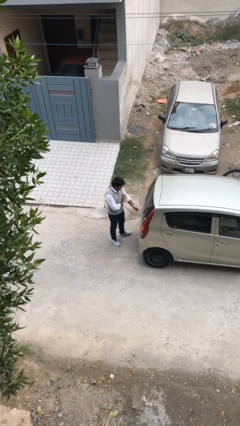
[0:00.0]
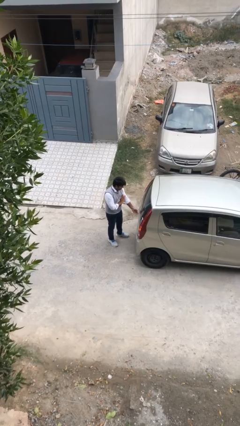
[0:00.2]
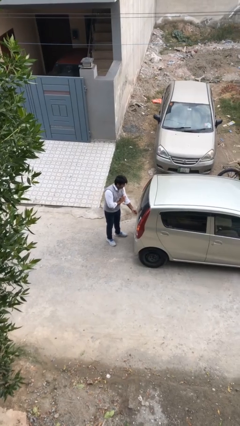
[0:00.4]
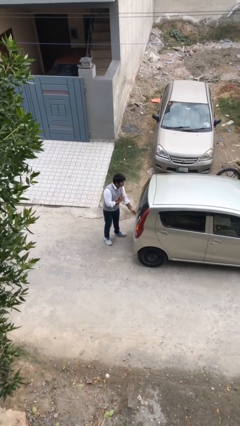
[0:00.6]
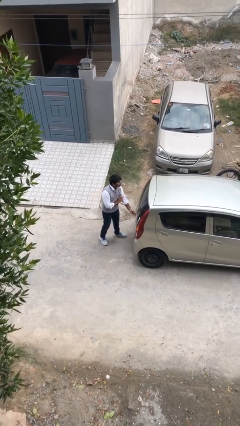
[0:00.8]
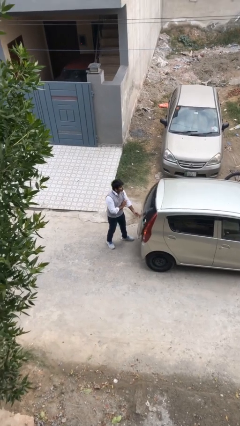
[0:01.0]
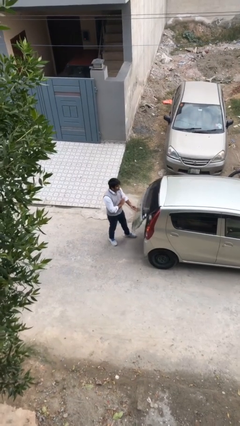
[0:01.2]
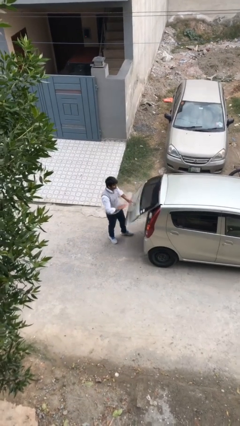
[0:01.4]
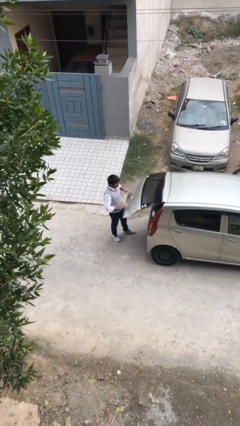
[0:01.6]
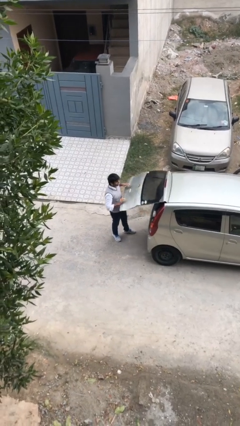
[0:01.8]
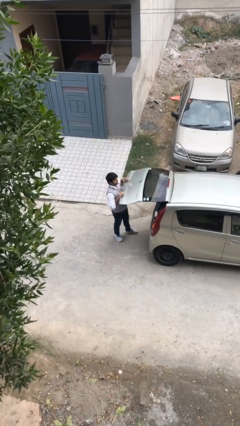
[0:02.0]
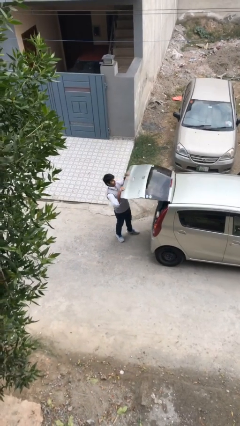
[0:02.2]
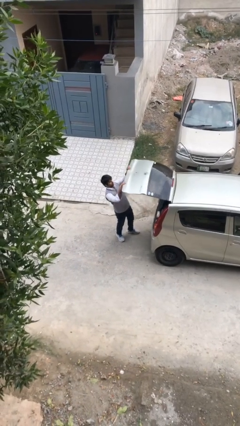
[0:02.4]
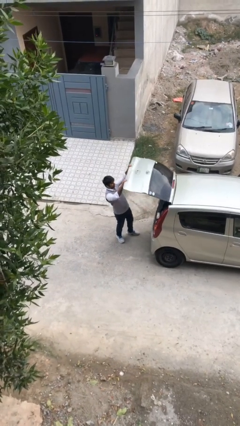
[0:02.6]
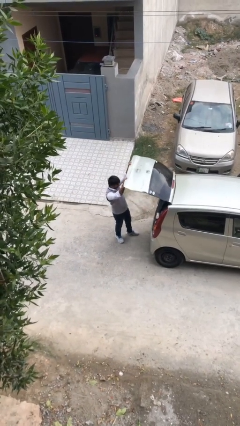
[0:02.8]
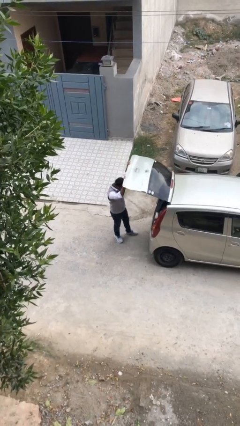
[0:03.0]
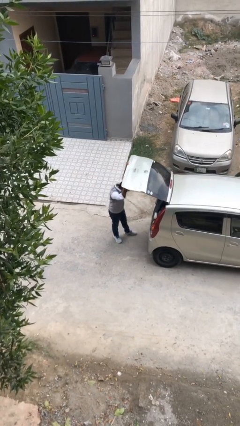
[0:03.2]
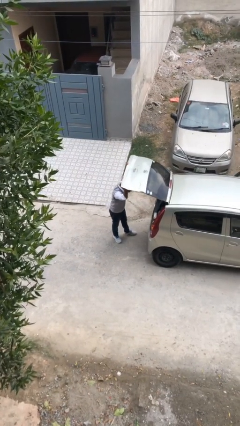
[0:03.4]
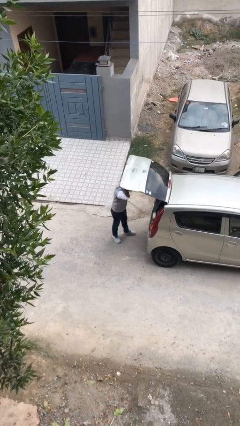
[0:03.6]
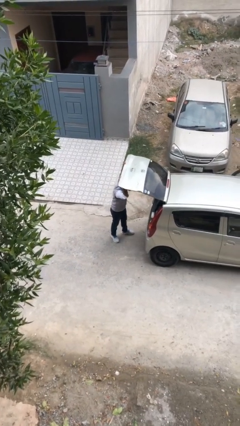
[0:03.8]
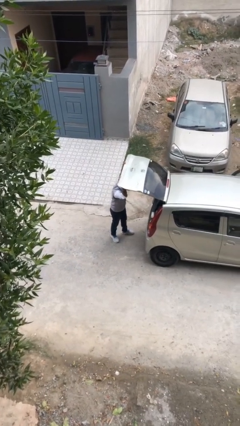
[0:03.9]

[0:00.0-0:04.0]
person opens car trunk

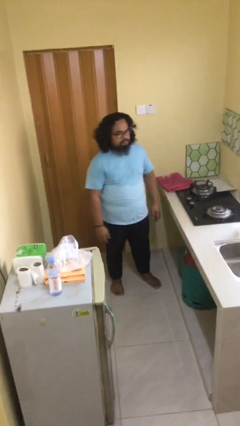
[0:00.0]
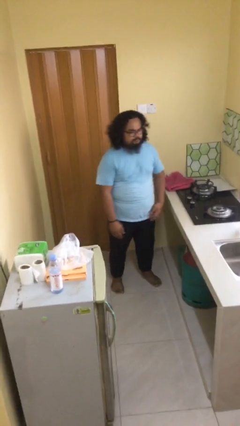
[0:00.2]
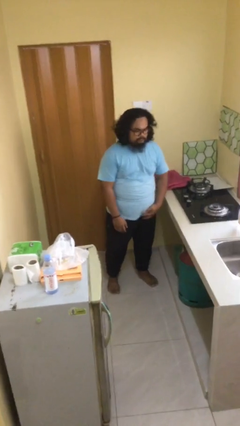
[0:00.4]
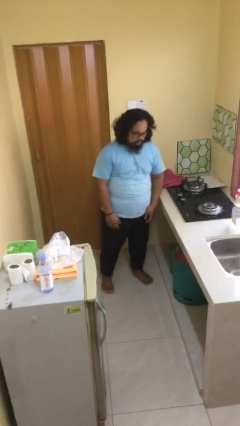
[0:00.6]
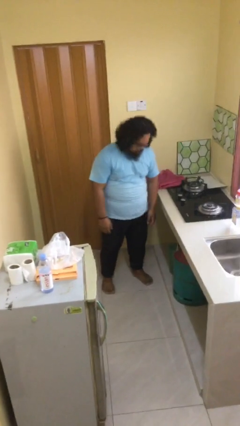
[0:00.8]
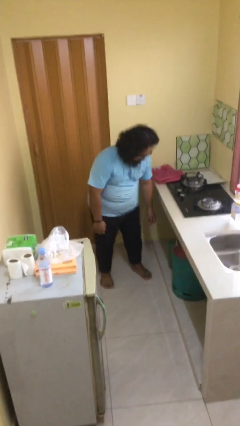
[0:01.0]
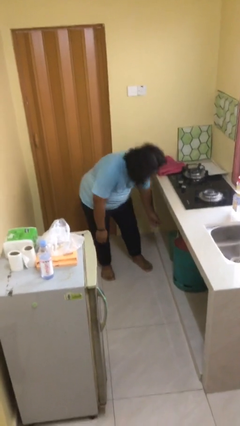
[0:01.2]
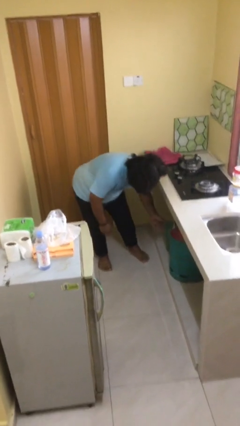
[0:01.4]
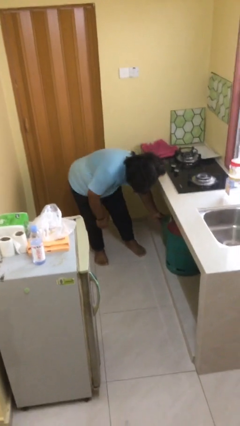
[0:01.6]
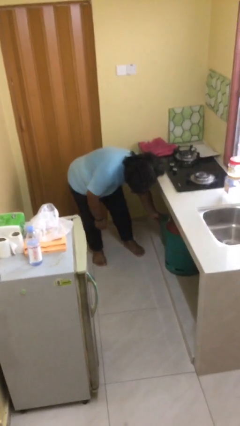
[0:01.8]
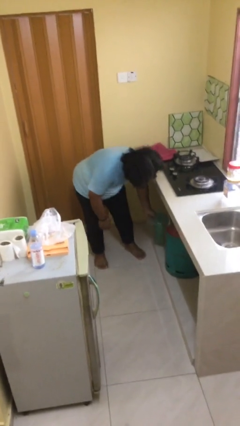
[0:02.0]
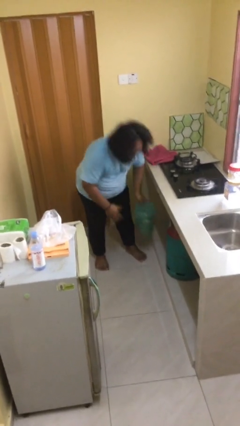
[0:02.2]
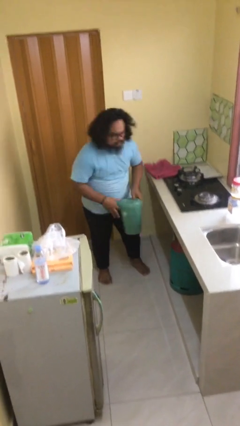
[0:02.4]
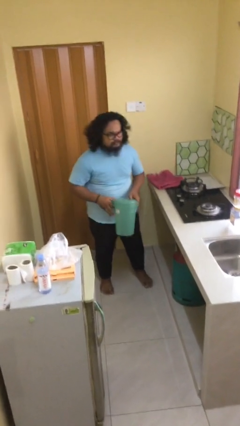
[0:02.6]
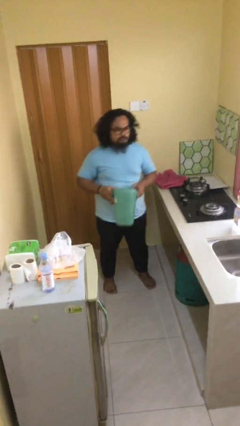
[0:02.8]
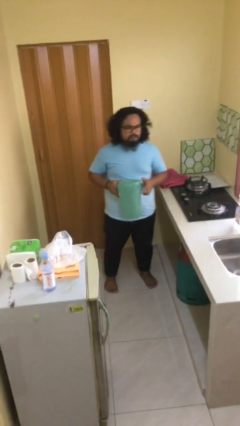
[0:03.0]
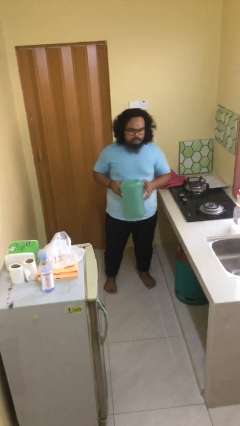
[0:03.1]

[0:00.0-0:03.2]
person picks up object from cabinet

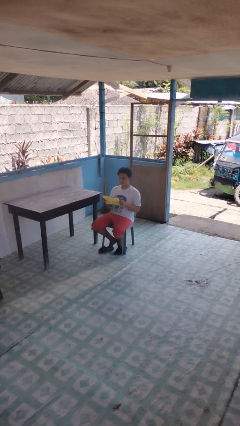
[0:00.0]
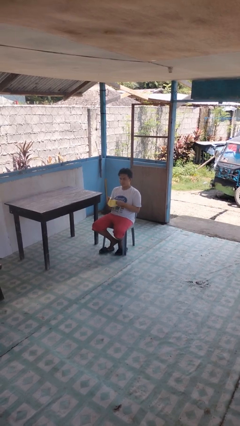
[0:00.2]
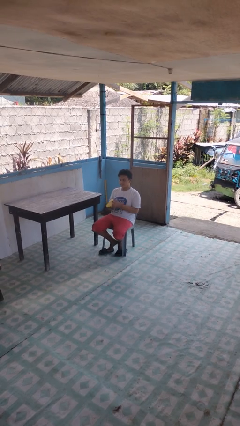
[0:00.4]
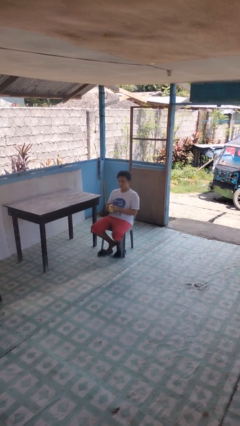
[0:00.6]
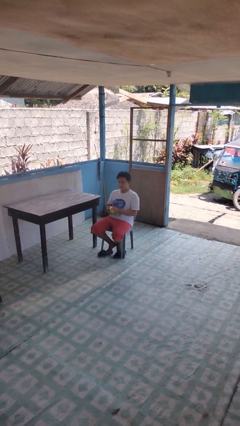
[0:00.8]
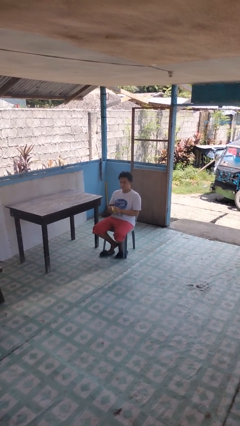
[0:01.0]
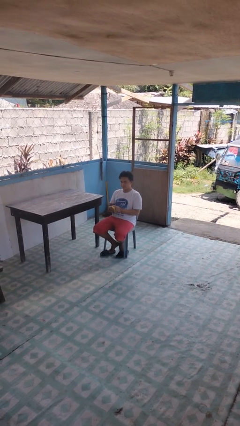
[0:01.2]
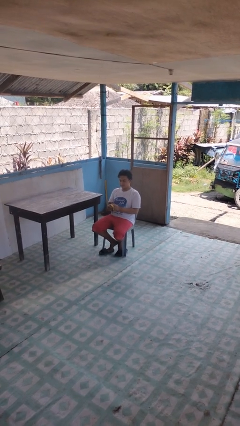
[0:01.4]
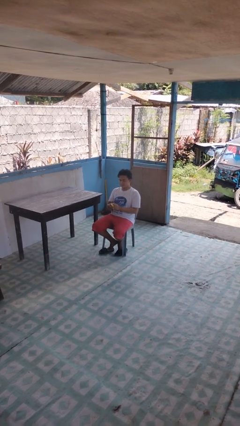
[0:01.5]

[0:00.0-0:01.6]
person crumples paper

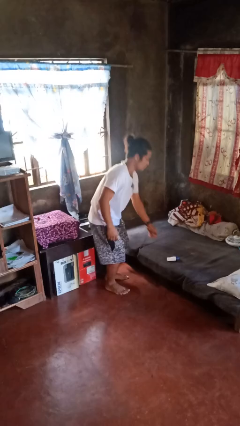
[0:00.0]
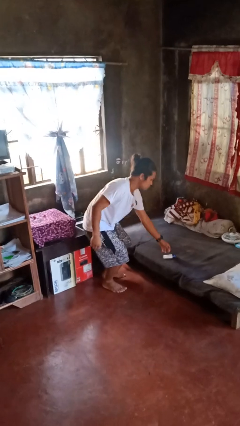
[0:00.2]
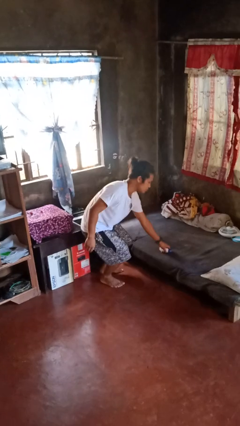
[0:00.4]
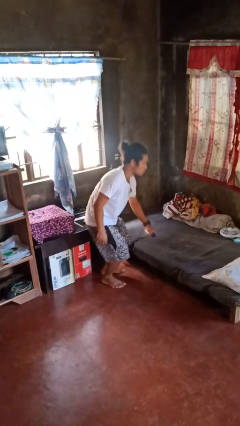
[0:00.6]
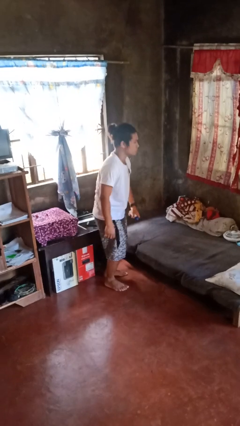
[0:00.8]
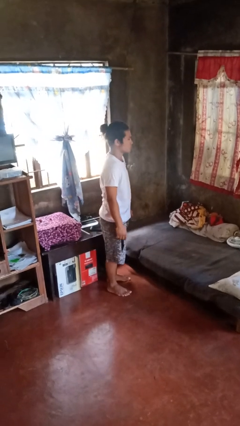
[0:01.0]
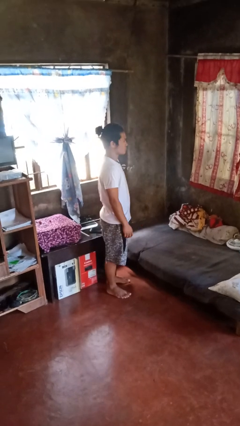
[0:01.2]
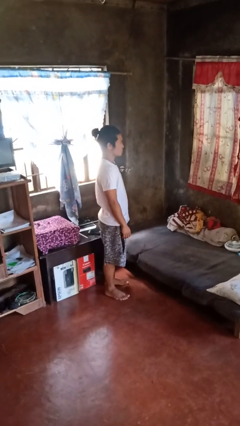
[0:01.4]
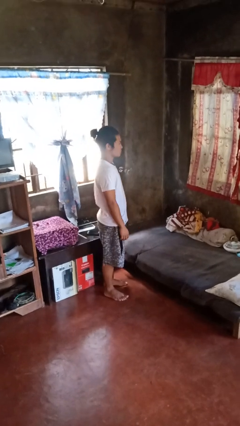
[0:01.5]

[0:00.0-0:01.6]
person picks up object from bed

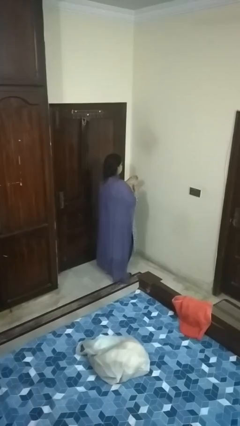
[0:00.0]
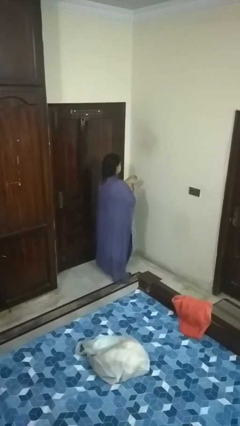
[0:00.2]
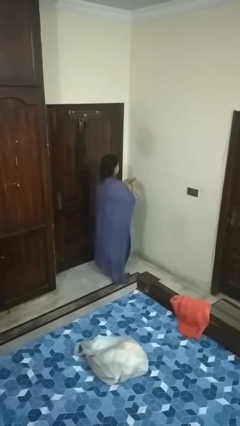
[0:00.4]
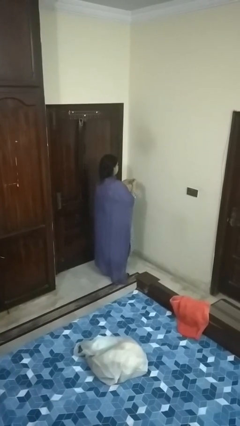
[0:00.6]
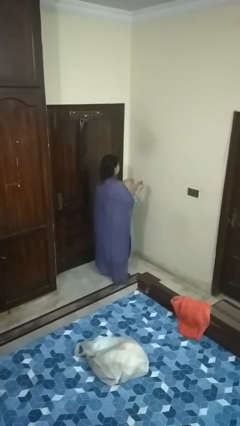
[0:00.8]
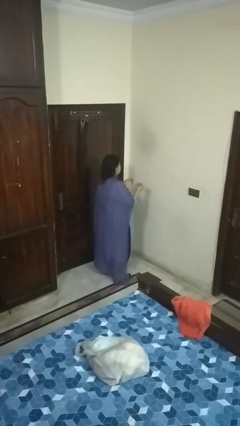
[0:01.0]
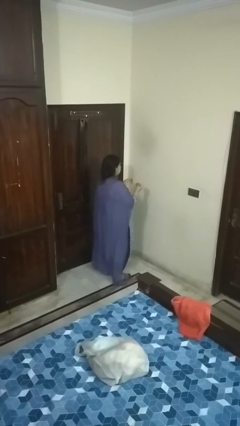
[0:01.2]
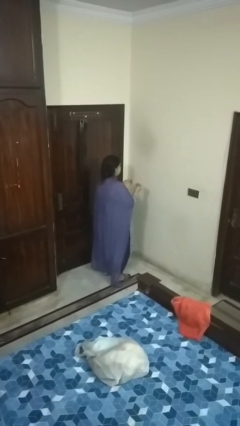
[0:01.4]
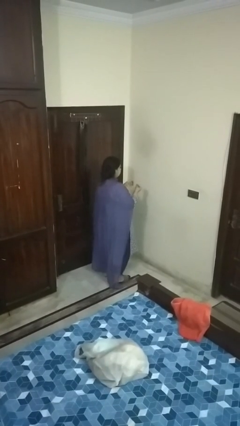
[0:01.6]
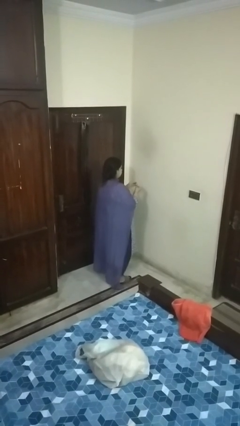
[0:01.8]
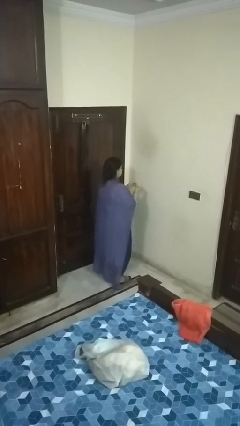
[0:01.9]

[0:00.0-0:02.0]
person takes off ring

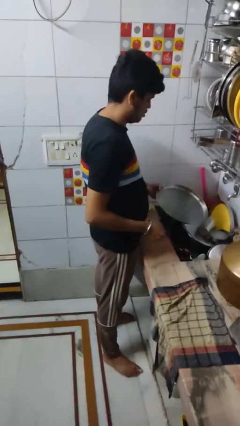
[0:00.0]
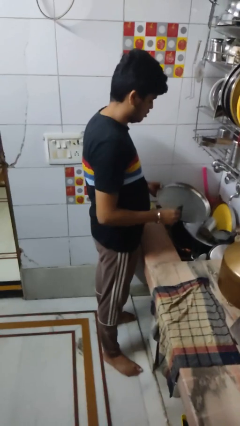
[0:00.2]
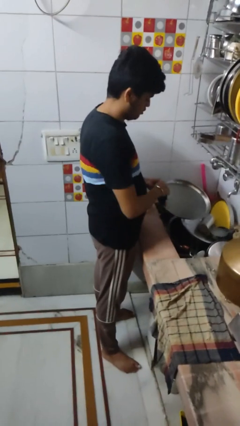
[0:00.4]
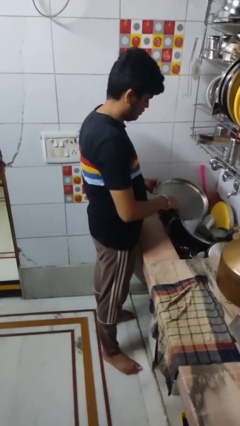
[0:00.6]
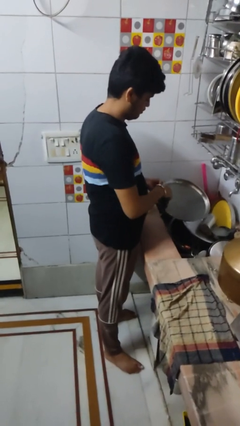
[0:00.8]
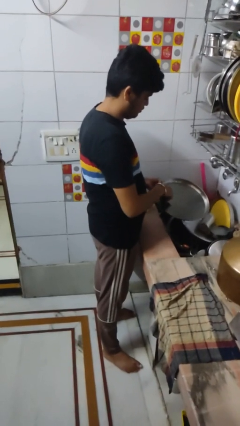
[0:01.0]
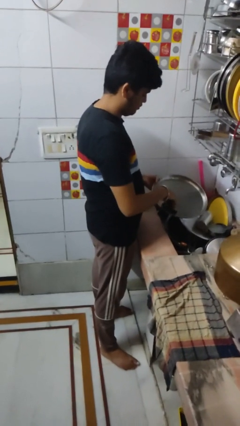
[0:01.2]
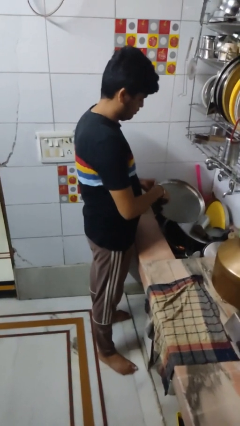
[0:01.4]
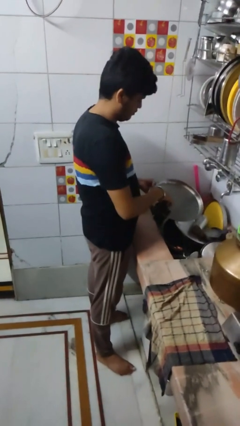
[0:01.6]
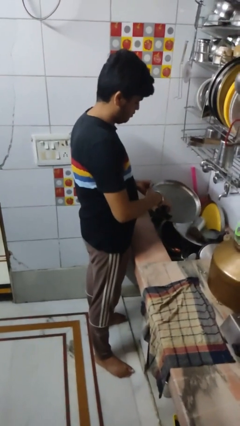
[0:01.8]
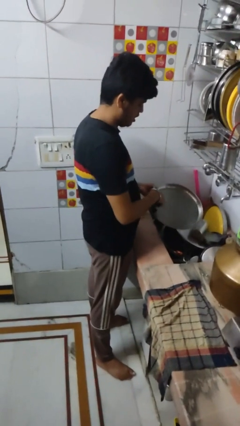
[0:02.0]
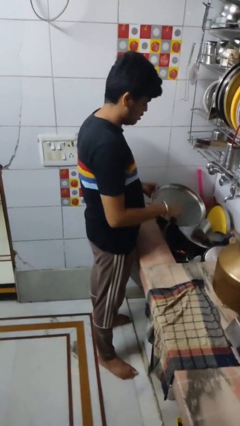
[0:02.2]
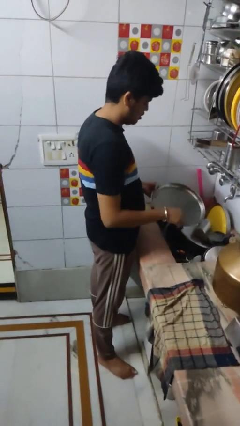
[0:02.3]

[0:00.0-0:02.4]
person washes dish

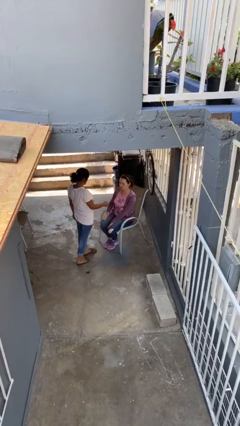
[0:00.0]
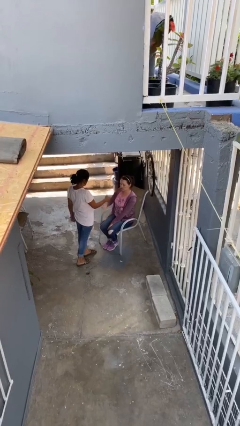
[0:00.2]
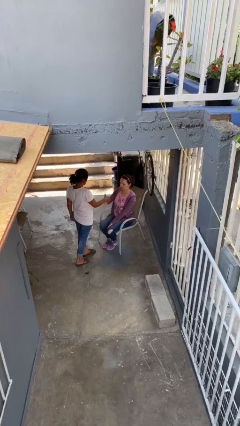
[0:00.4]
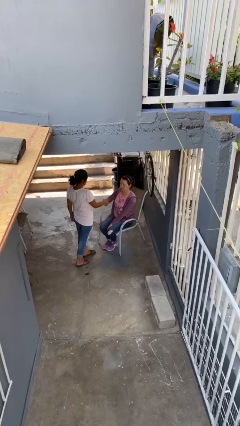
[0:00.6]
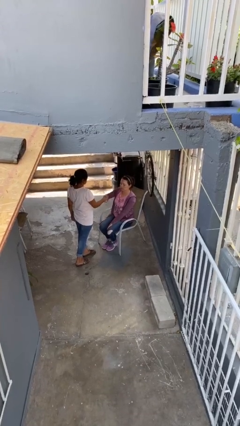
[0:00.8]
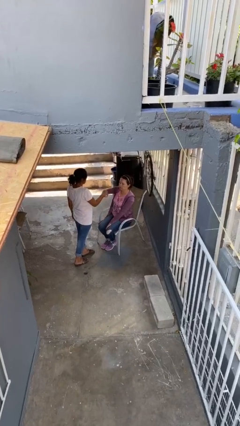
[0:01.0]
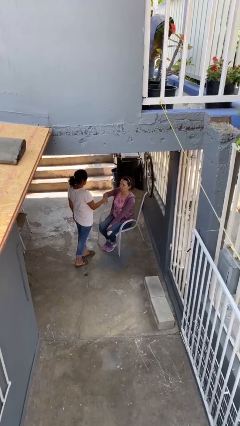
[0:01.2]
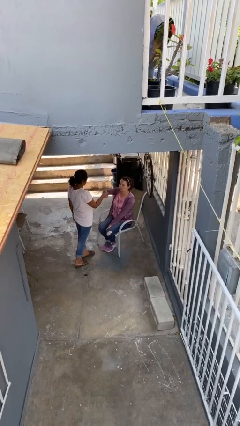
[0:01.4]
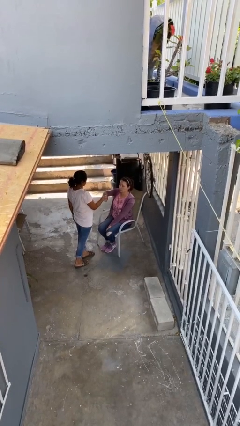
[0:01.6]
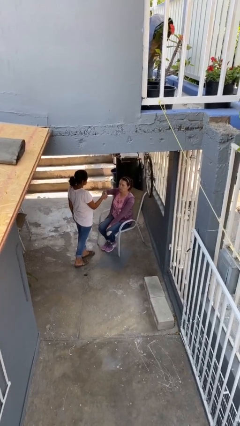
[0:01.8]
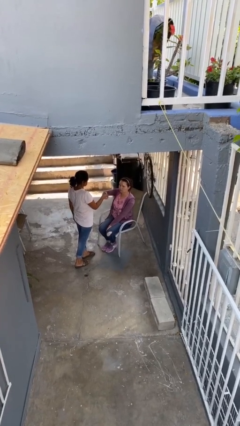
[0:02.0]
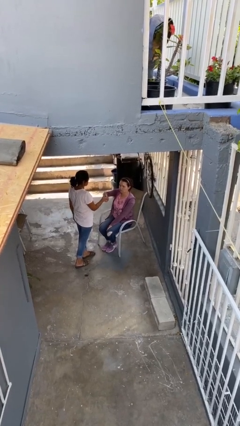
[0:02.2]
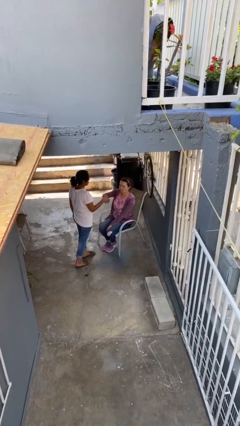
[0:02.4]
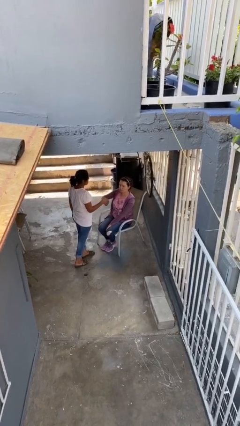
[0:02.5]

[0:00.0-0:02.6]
person shakes hand
